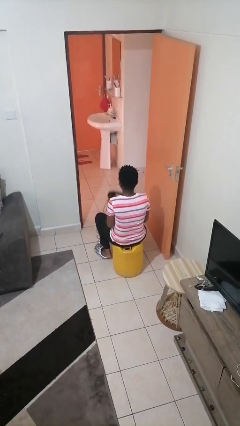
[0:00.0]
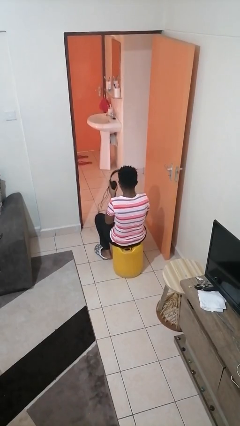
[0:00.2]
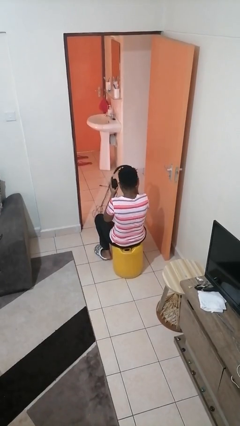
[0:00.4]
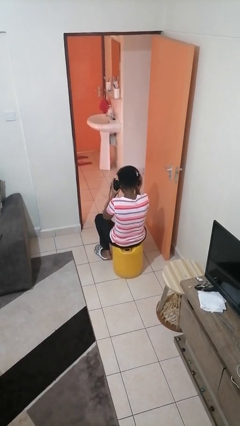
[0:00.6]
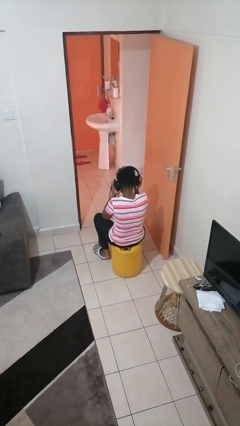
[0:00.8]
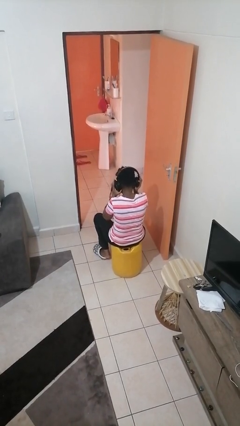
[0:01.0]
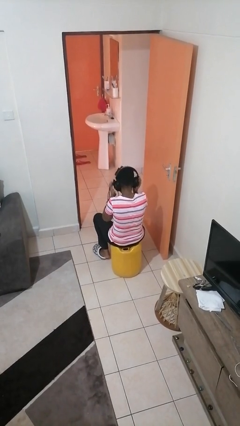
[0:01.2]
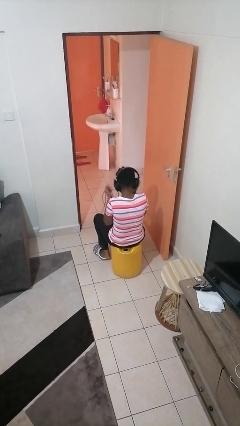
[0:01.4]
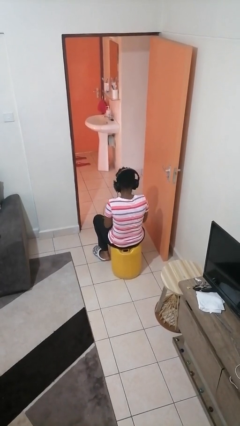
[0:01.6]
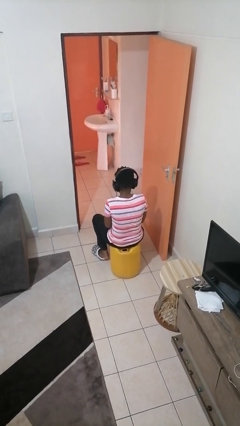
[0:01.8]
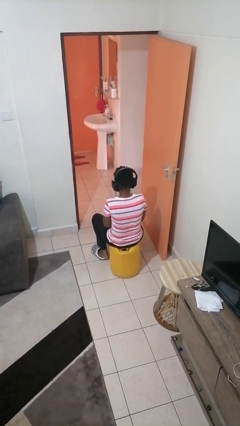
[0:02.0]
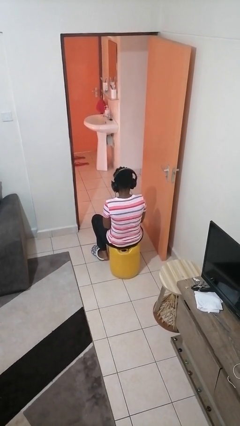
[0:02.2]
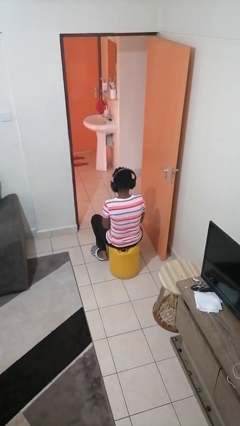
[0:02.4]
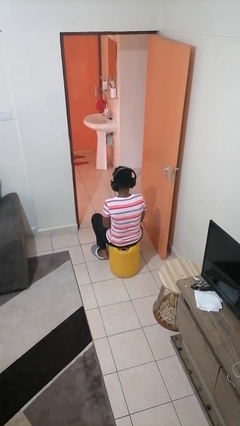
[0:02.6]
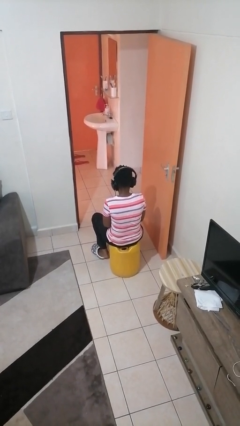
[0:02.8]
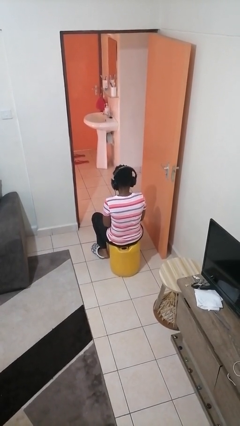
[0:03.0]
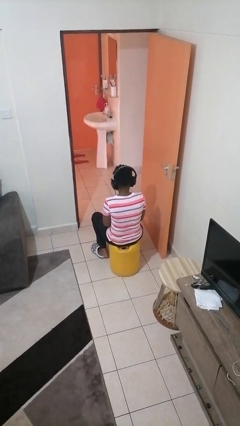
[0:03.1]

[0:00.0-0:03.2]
person puts on headphones

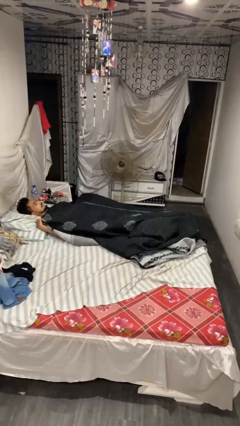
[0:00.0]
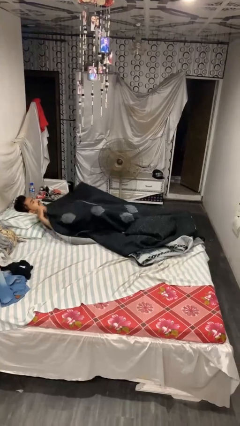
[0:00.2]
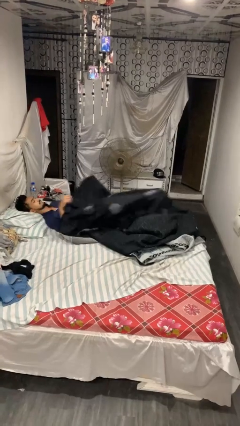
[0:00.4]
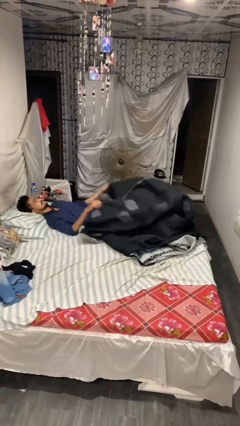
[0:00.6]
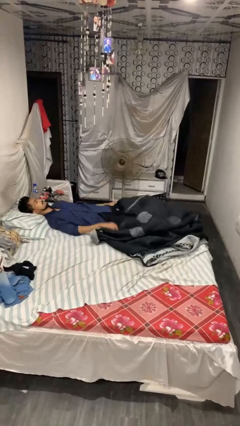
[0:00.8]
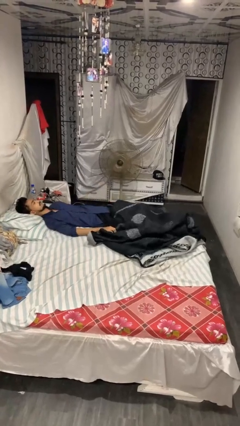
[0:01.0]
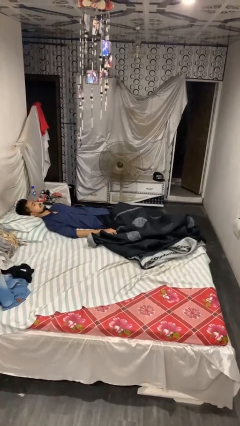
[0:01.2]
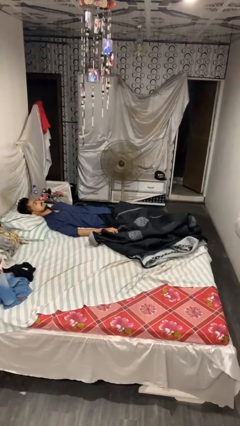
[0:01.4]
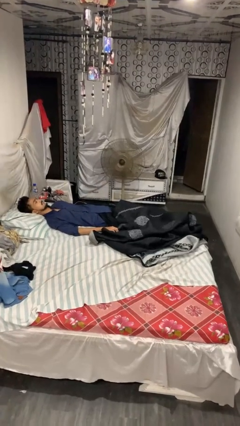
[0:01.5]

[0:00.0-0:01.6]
person uncovers with blanket

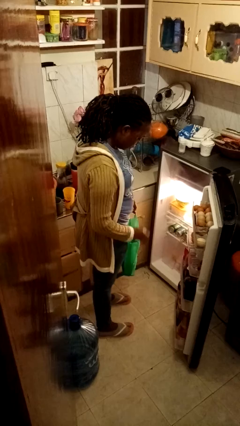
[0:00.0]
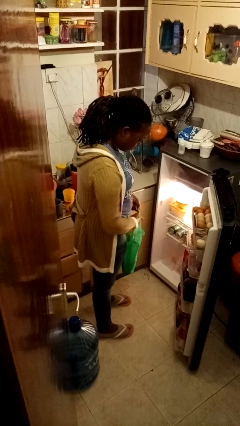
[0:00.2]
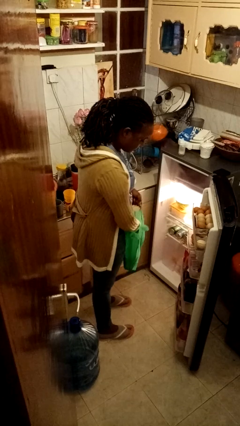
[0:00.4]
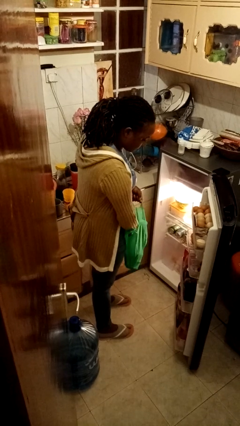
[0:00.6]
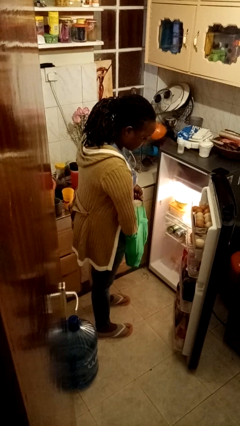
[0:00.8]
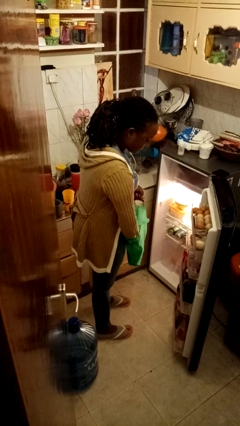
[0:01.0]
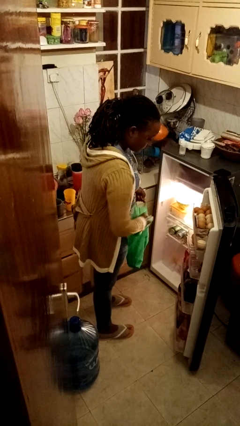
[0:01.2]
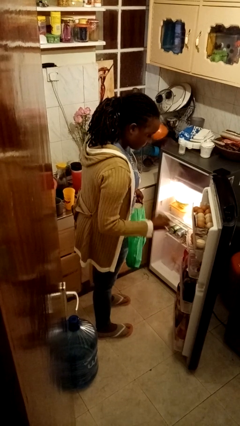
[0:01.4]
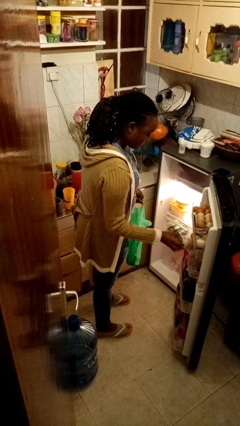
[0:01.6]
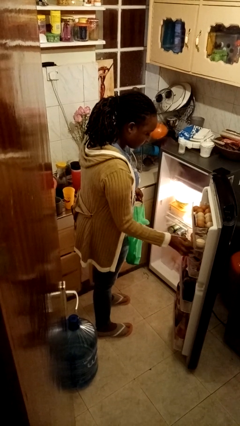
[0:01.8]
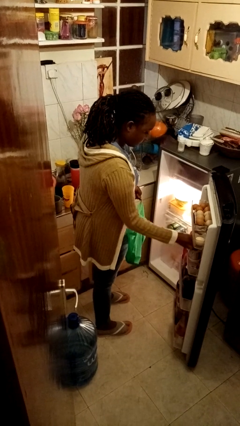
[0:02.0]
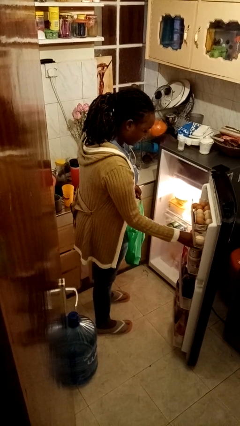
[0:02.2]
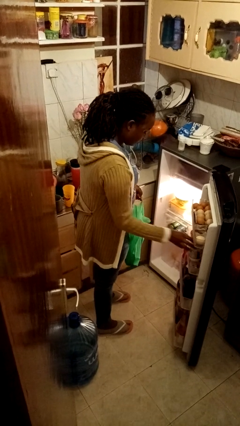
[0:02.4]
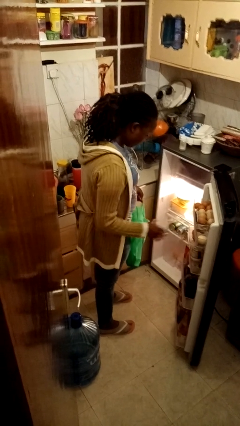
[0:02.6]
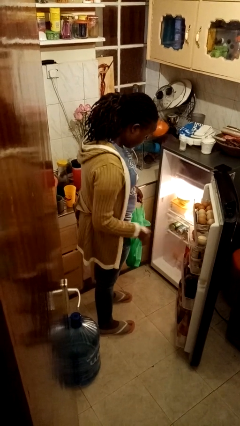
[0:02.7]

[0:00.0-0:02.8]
person loads groceries into refrigerator

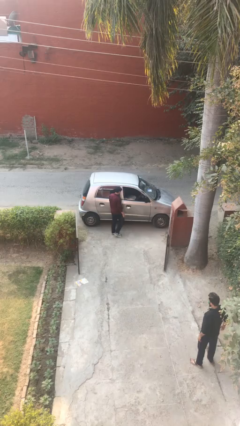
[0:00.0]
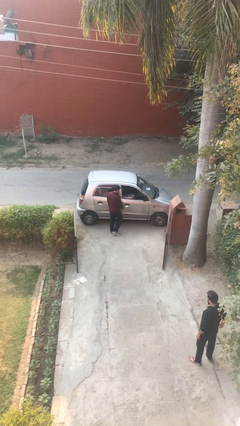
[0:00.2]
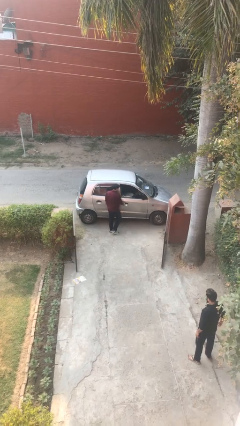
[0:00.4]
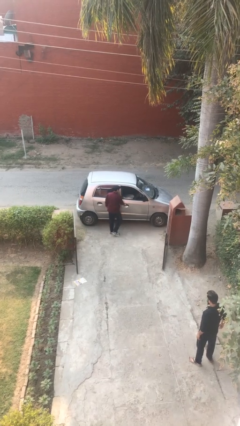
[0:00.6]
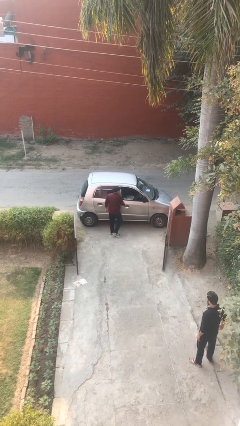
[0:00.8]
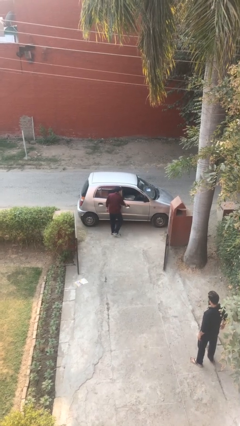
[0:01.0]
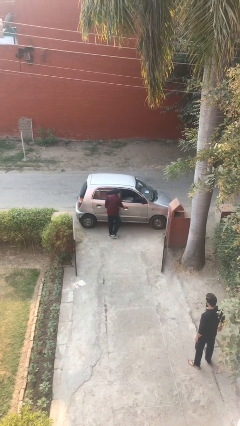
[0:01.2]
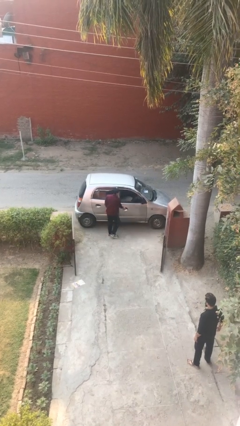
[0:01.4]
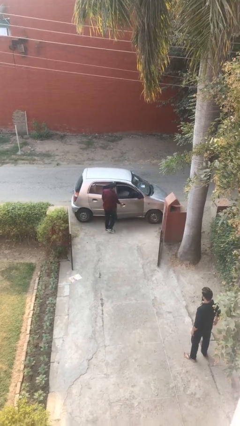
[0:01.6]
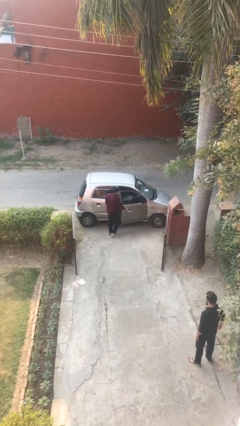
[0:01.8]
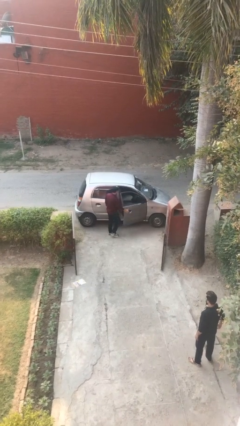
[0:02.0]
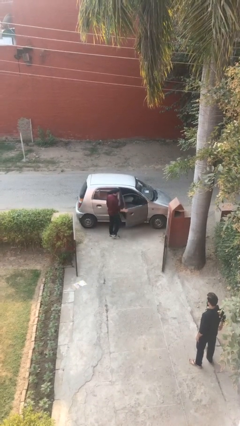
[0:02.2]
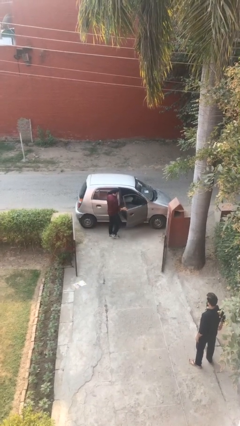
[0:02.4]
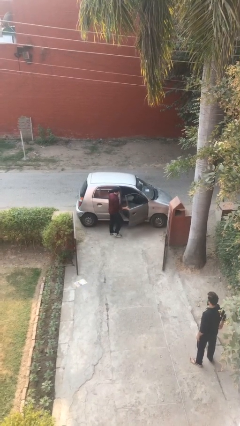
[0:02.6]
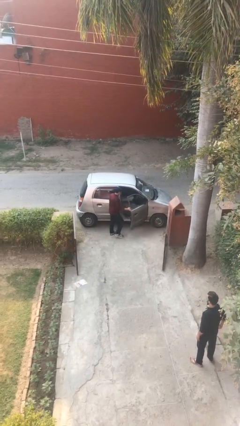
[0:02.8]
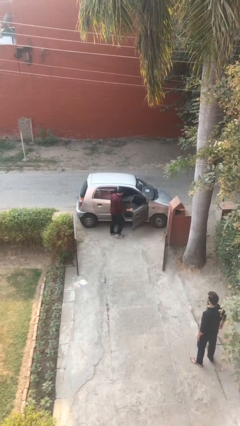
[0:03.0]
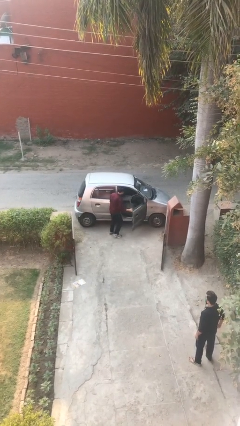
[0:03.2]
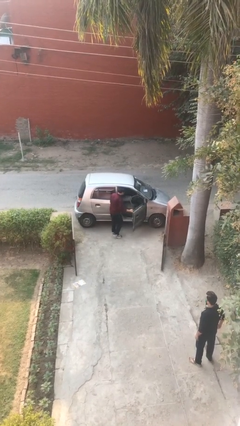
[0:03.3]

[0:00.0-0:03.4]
person opens car door

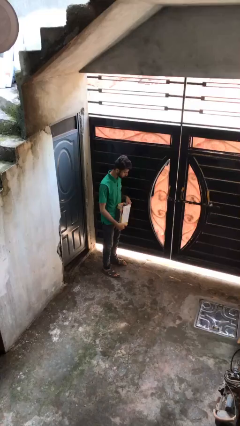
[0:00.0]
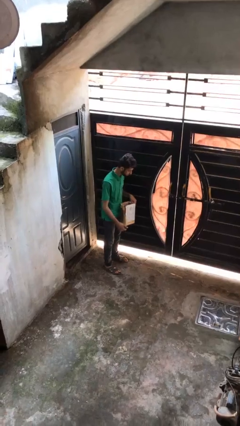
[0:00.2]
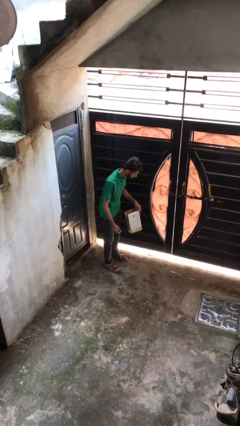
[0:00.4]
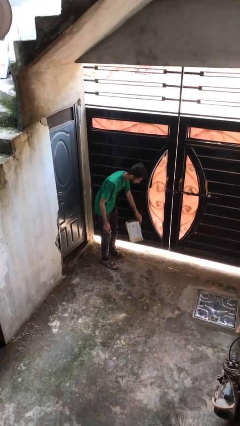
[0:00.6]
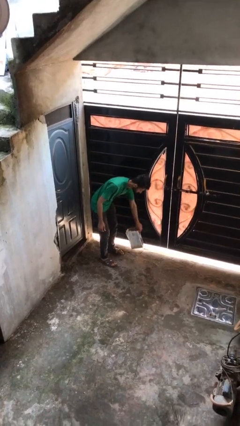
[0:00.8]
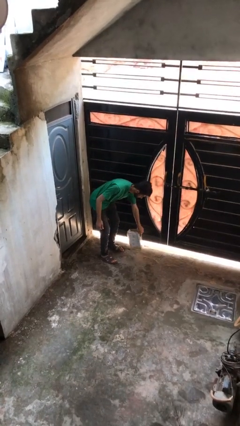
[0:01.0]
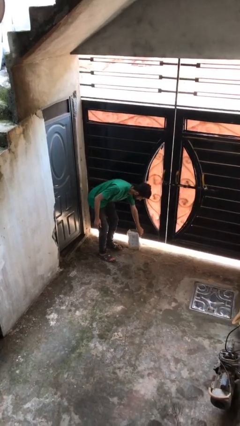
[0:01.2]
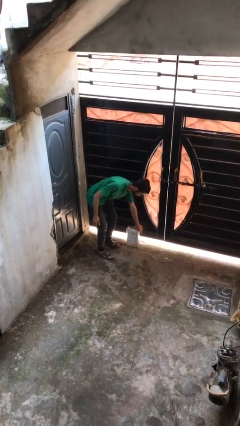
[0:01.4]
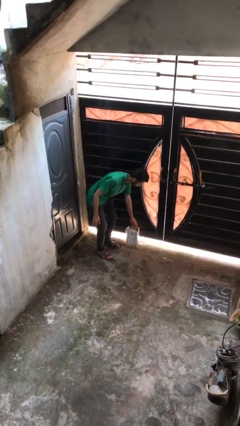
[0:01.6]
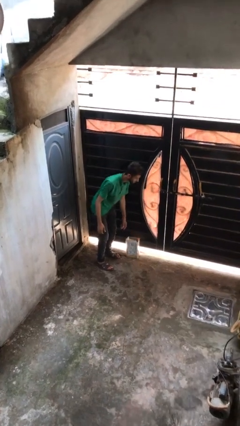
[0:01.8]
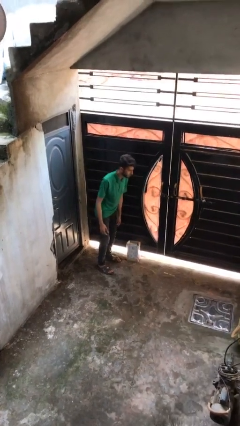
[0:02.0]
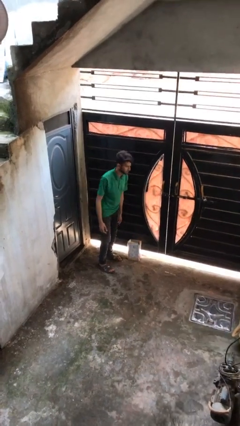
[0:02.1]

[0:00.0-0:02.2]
person puts down object on floor

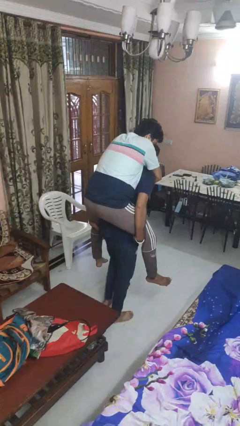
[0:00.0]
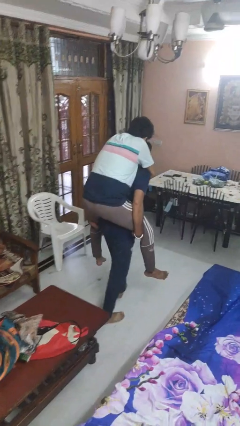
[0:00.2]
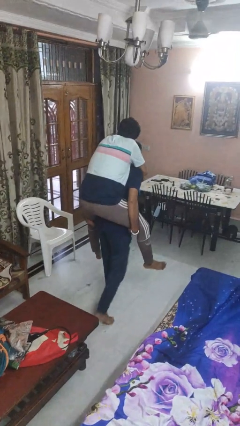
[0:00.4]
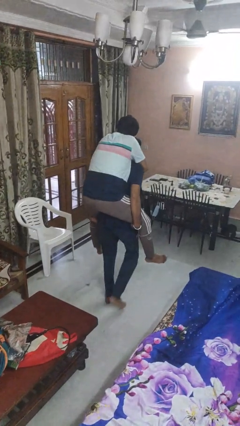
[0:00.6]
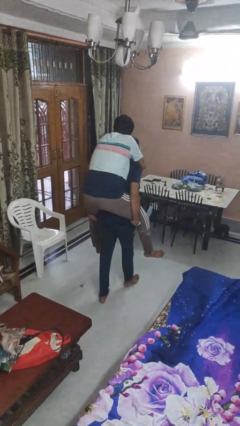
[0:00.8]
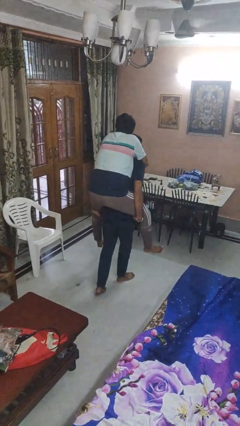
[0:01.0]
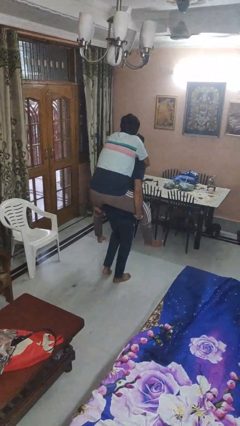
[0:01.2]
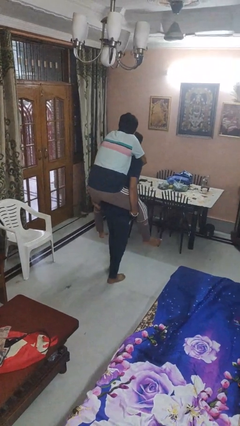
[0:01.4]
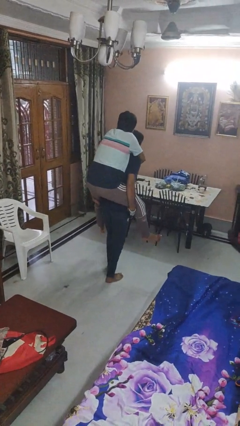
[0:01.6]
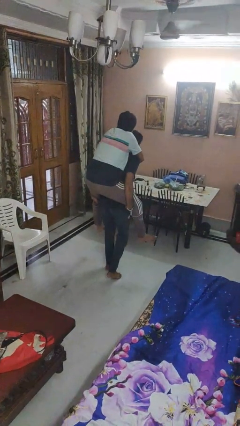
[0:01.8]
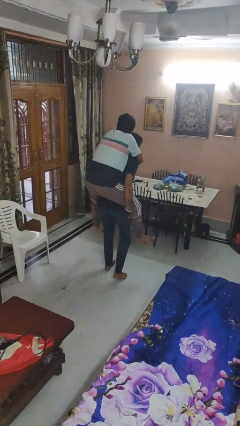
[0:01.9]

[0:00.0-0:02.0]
person carries person on back

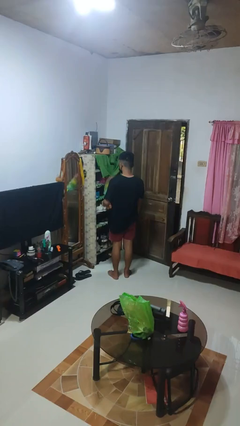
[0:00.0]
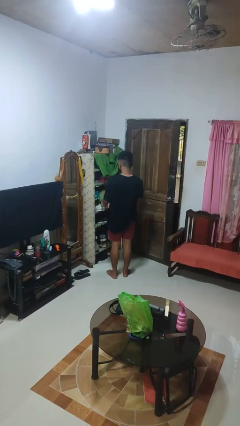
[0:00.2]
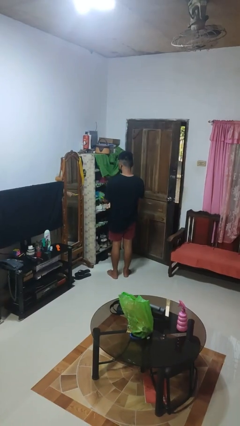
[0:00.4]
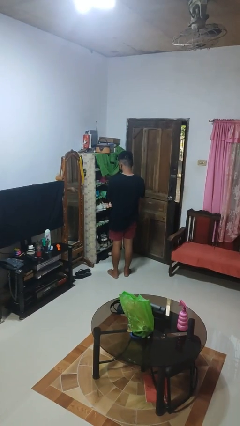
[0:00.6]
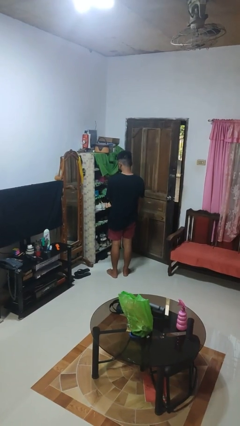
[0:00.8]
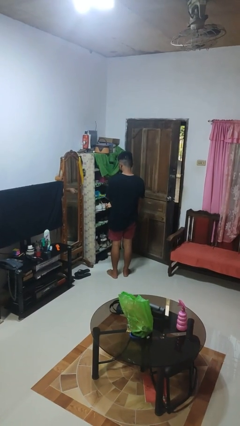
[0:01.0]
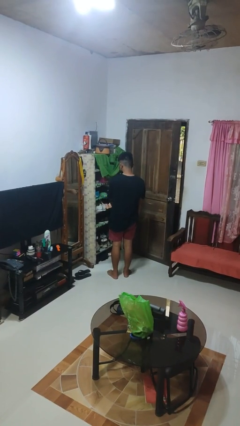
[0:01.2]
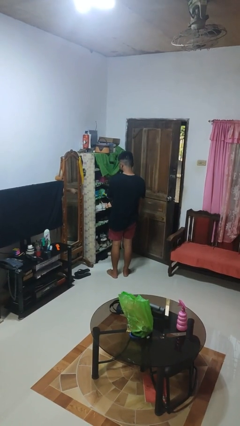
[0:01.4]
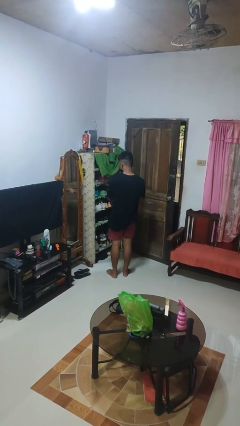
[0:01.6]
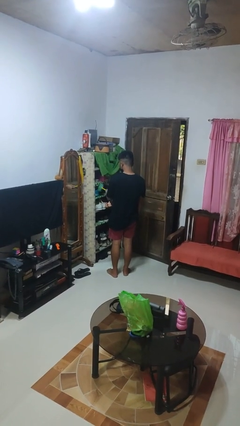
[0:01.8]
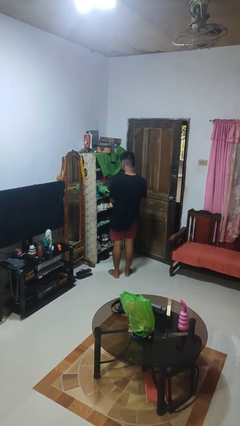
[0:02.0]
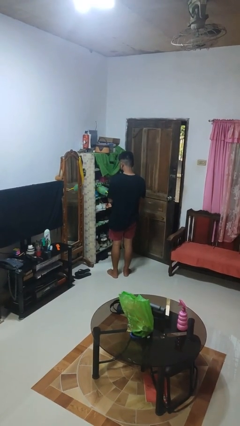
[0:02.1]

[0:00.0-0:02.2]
person dusts furniture
